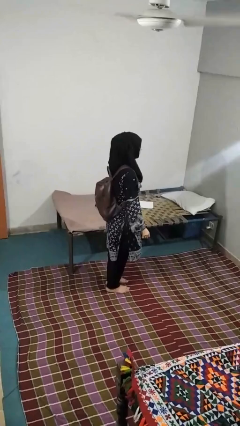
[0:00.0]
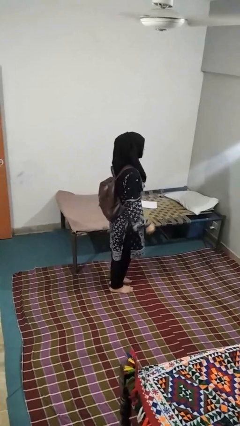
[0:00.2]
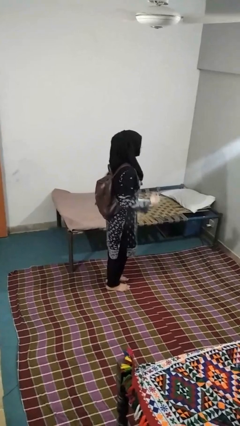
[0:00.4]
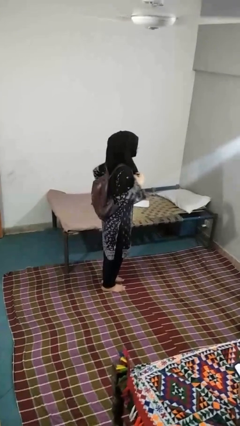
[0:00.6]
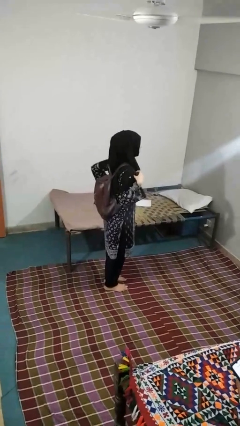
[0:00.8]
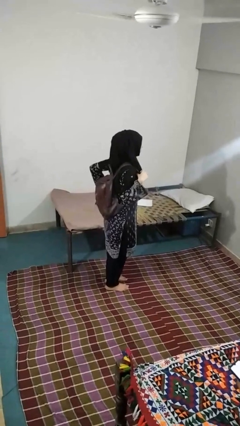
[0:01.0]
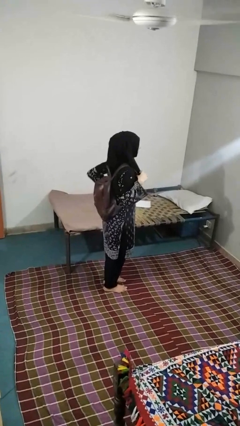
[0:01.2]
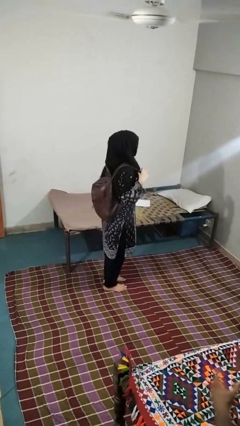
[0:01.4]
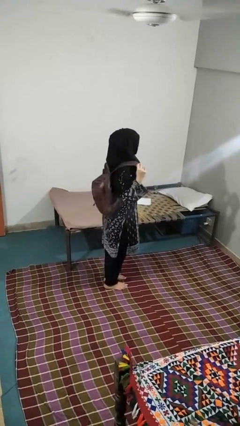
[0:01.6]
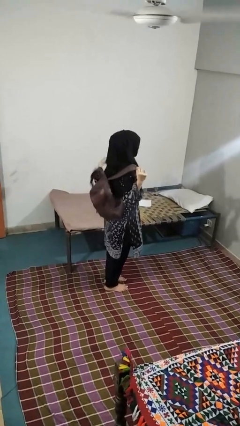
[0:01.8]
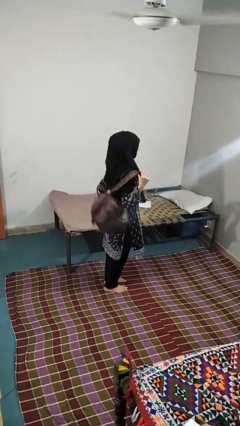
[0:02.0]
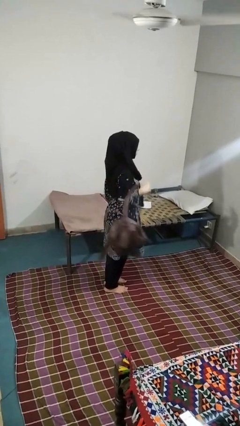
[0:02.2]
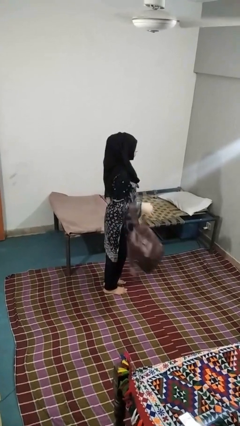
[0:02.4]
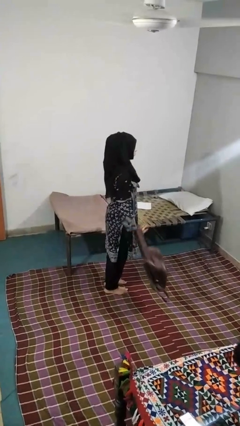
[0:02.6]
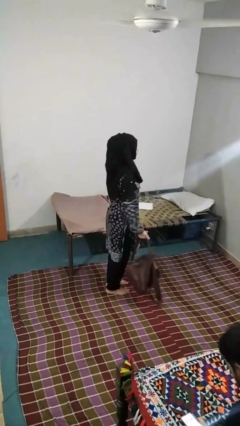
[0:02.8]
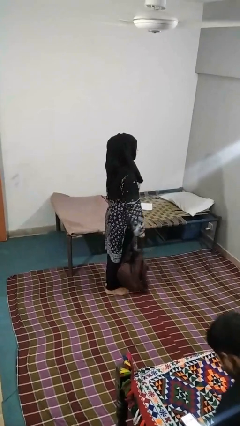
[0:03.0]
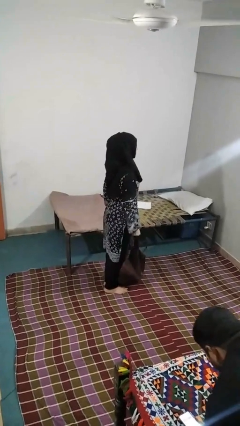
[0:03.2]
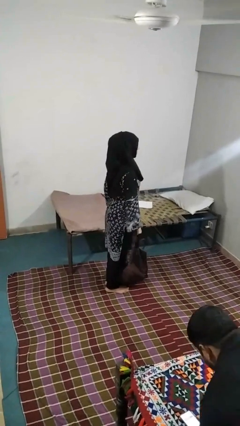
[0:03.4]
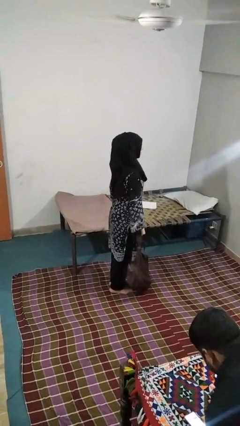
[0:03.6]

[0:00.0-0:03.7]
person takes off backpack

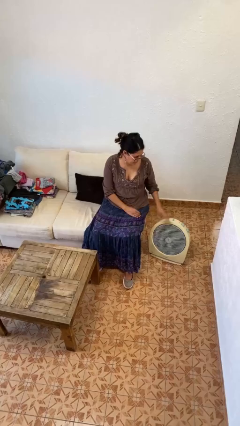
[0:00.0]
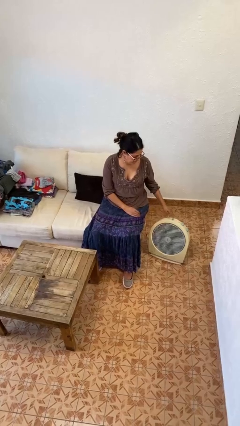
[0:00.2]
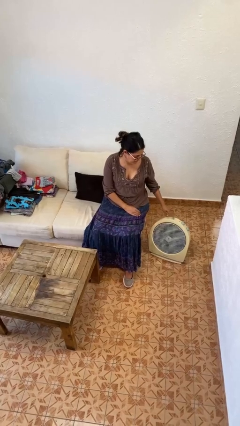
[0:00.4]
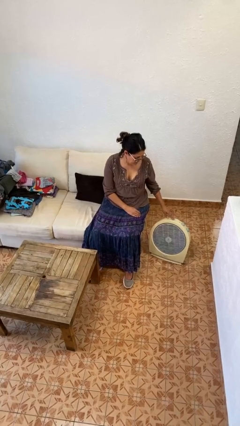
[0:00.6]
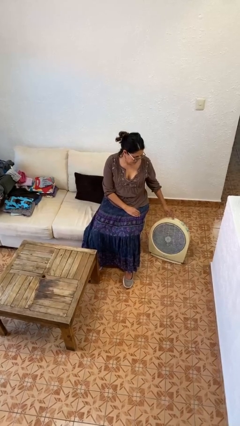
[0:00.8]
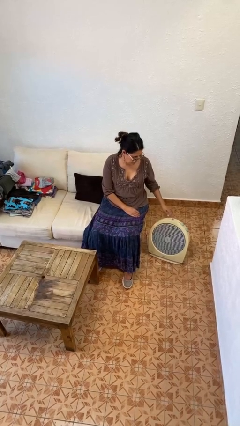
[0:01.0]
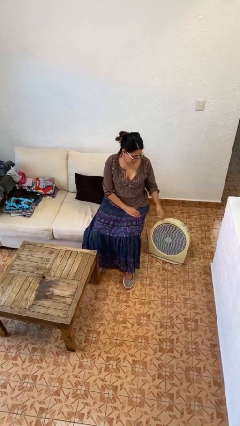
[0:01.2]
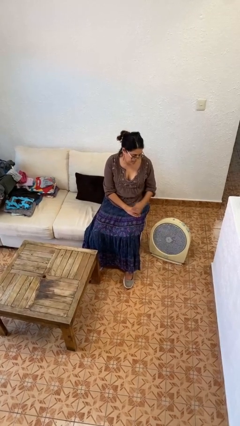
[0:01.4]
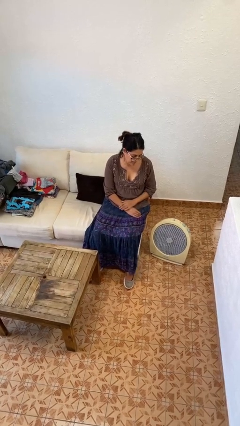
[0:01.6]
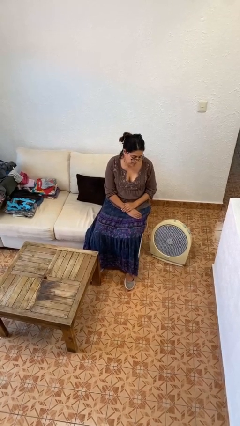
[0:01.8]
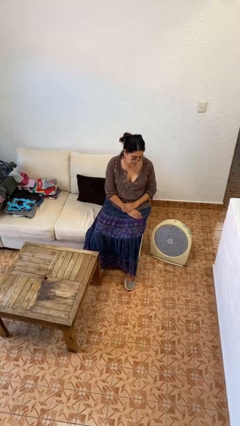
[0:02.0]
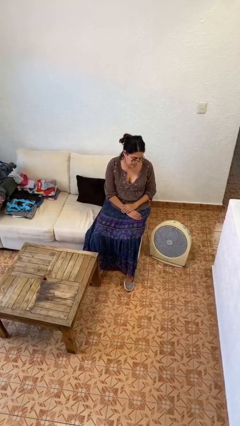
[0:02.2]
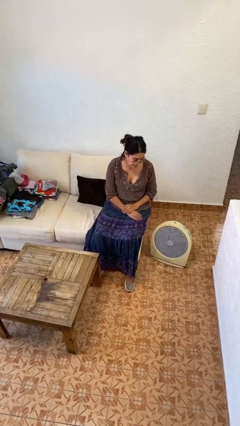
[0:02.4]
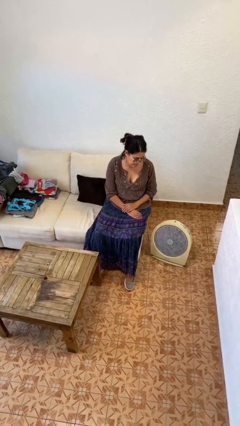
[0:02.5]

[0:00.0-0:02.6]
person turns on fan

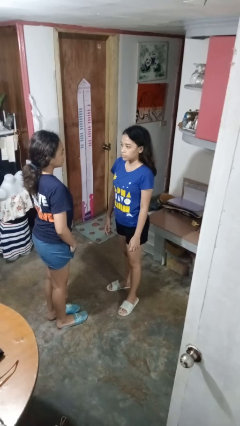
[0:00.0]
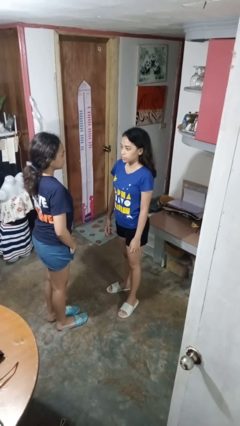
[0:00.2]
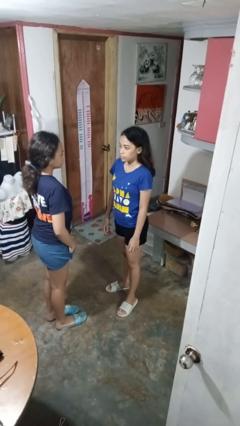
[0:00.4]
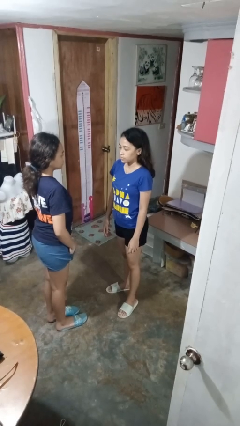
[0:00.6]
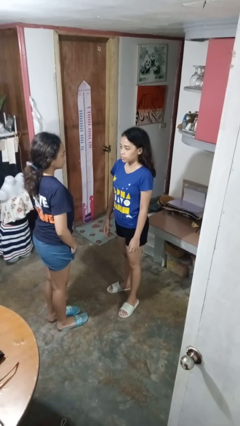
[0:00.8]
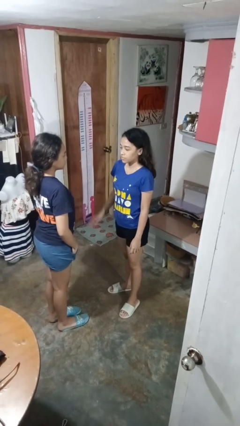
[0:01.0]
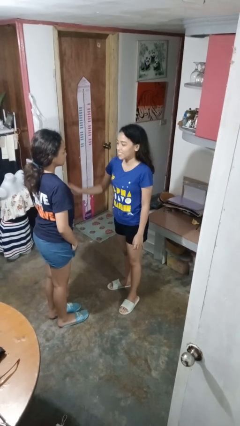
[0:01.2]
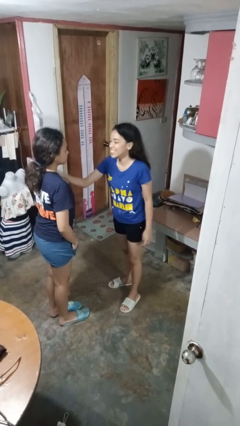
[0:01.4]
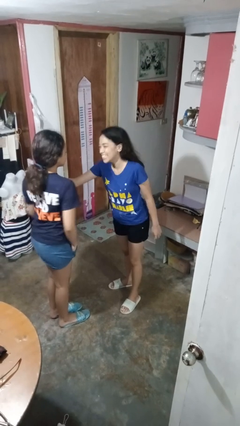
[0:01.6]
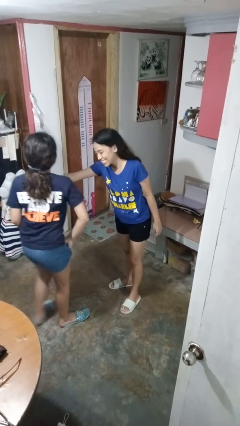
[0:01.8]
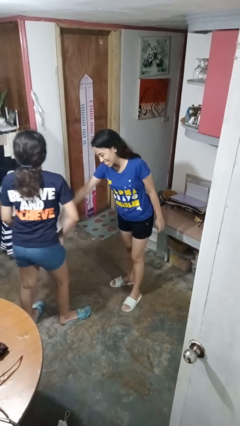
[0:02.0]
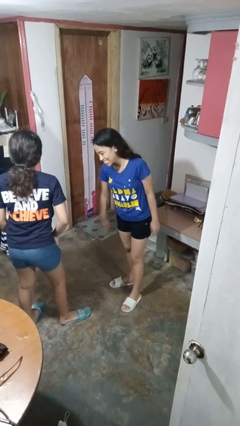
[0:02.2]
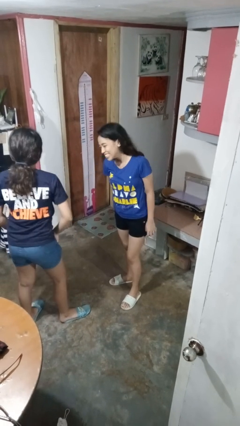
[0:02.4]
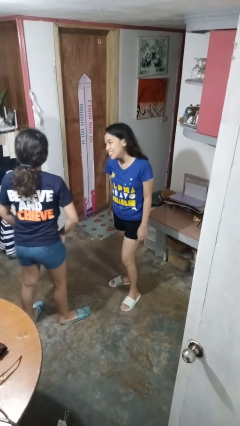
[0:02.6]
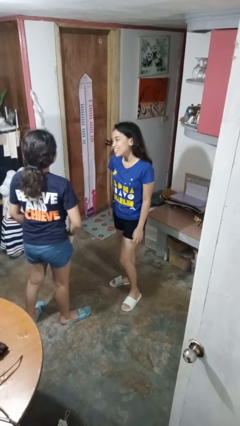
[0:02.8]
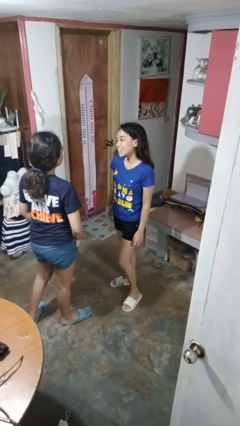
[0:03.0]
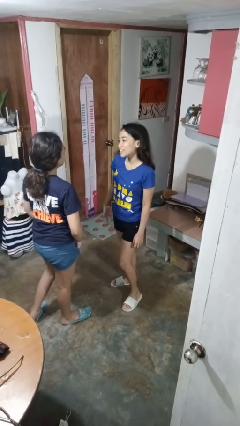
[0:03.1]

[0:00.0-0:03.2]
person shoves person

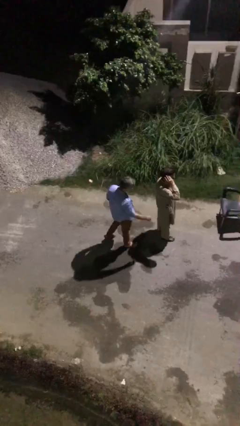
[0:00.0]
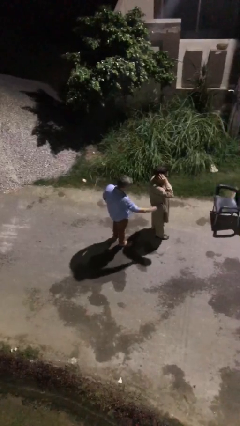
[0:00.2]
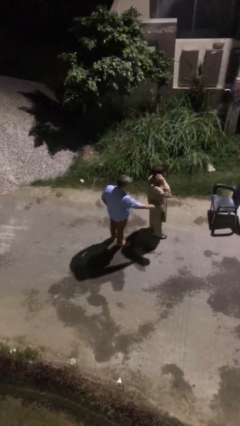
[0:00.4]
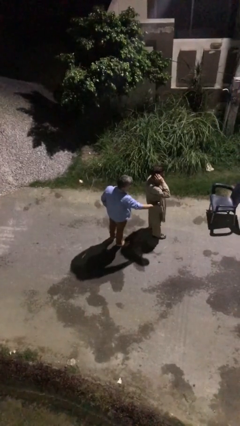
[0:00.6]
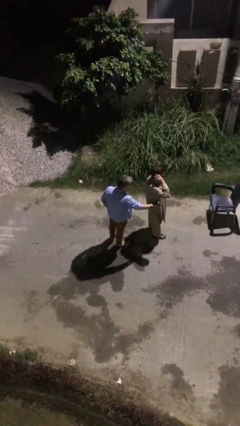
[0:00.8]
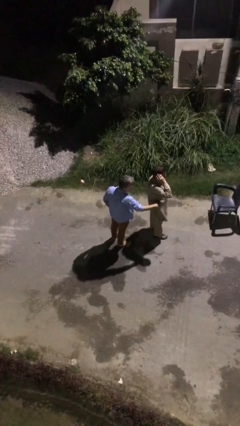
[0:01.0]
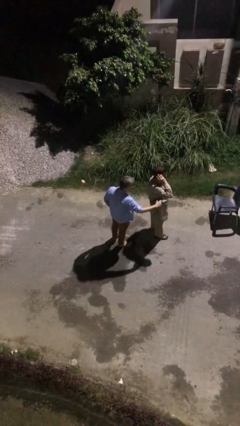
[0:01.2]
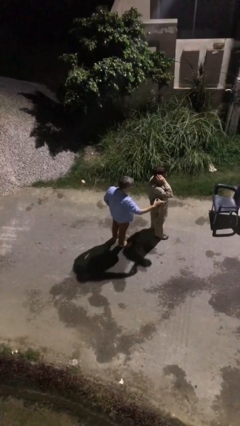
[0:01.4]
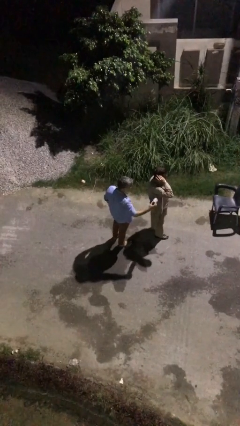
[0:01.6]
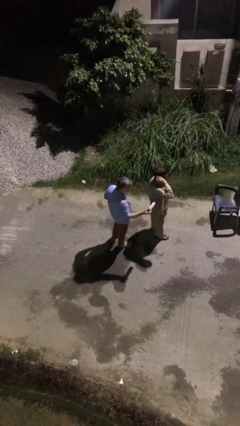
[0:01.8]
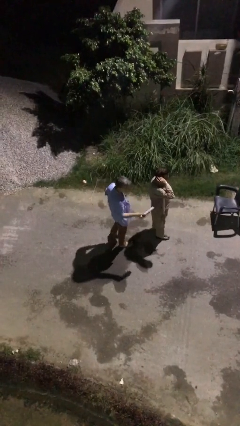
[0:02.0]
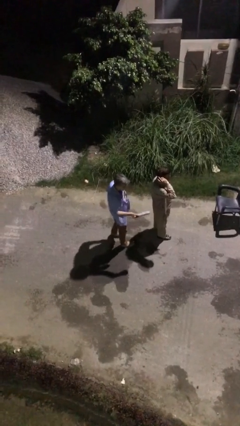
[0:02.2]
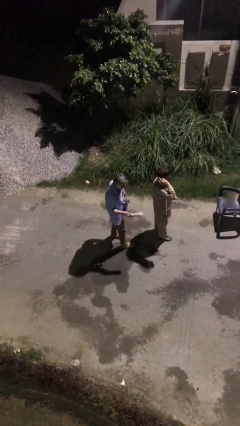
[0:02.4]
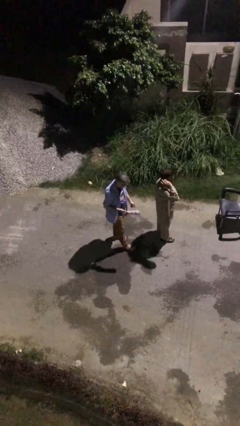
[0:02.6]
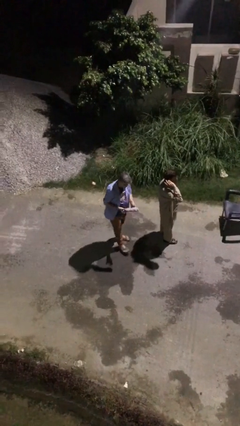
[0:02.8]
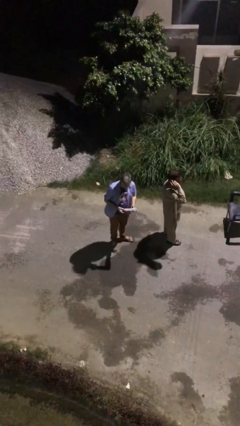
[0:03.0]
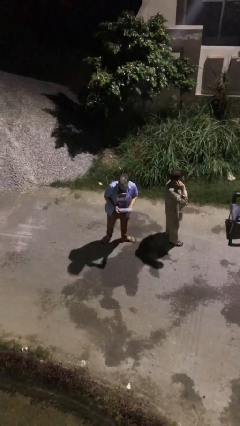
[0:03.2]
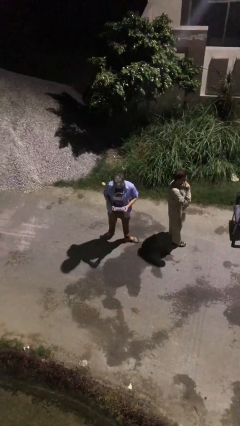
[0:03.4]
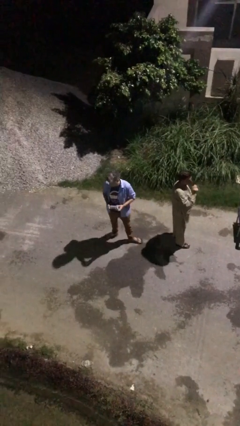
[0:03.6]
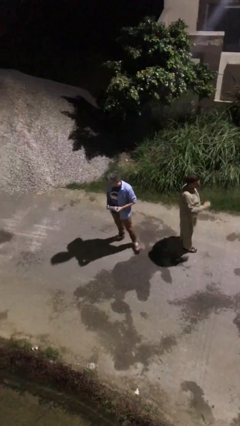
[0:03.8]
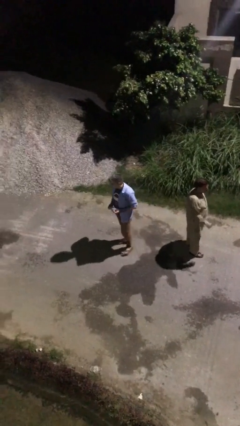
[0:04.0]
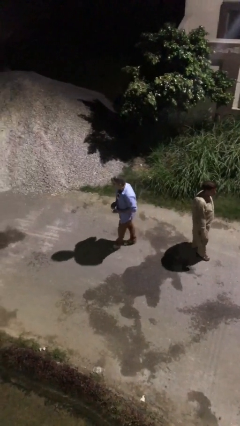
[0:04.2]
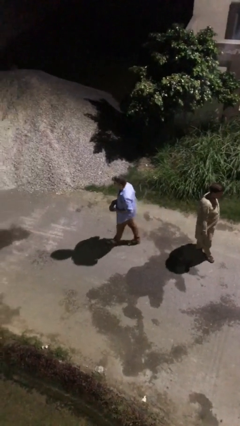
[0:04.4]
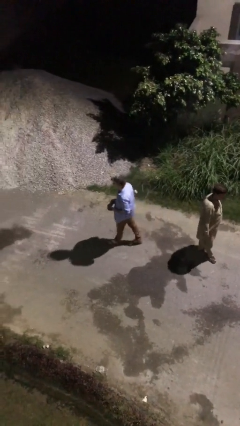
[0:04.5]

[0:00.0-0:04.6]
person steals object from person

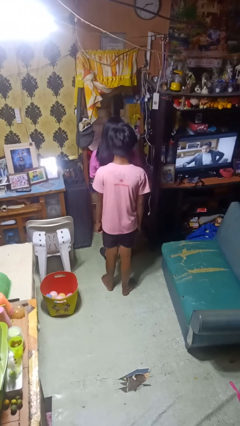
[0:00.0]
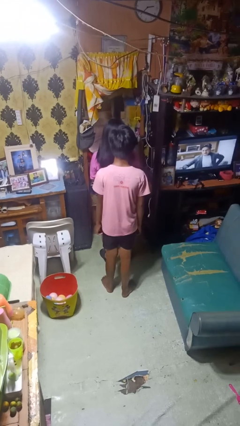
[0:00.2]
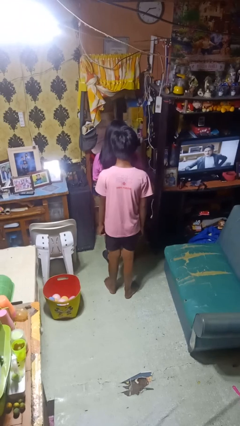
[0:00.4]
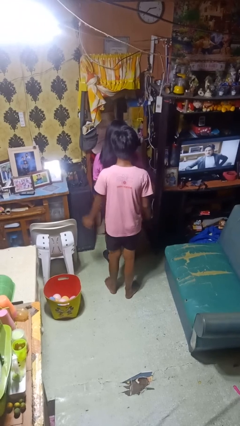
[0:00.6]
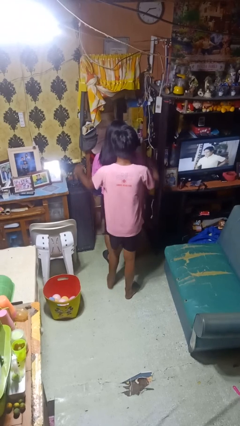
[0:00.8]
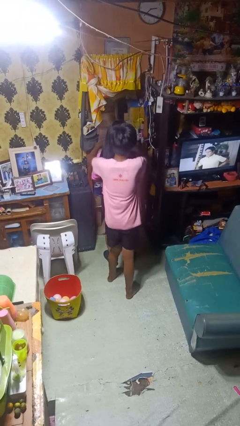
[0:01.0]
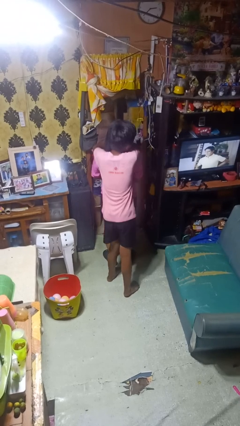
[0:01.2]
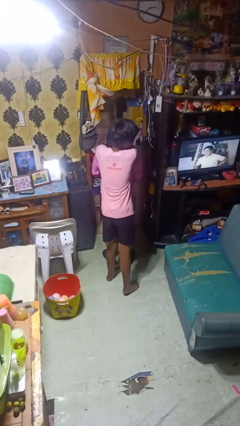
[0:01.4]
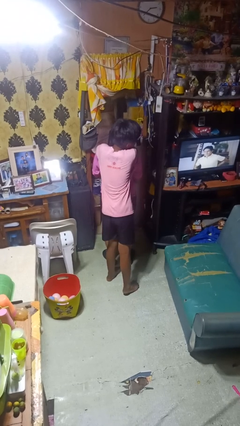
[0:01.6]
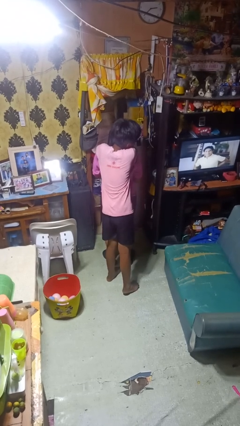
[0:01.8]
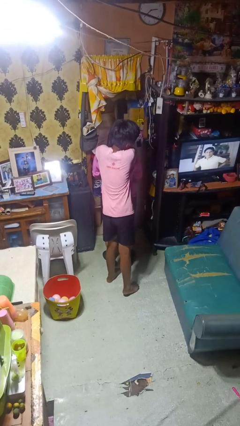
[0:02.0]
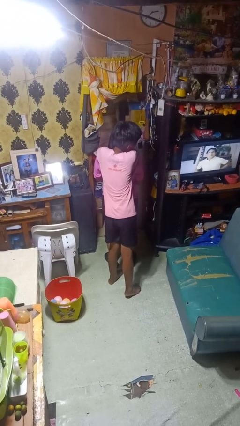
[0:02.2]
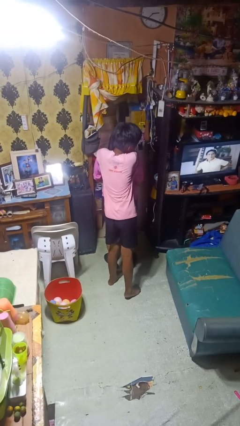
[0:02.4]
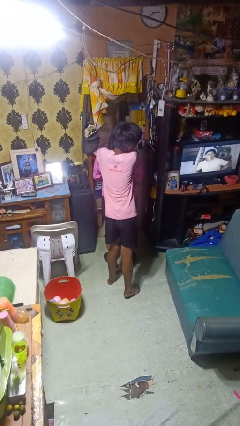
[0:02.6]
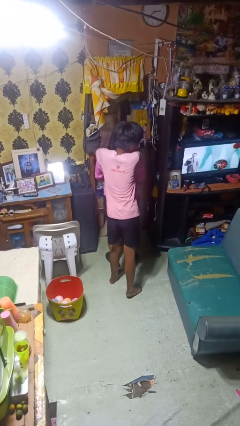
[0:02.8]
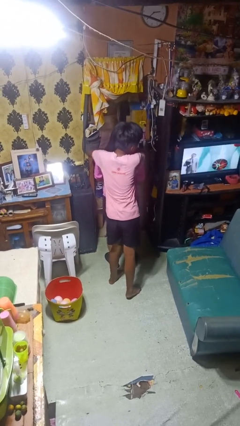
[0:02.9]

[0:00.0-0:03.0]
person hugs person from behind

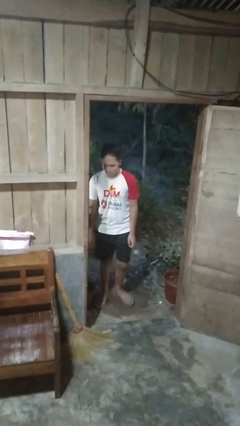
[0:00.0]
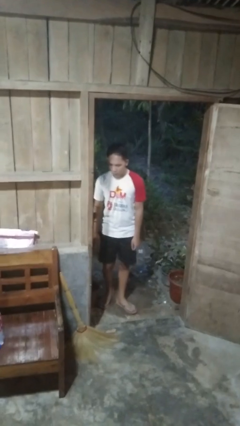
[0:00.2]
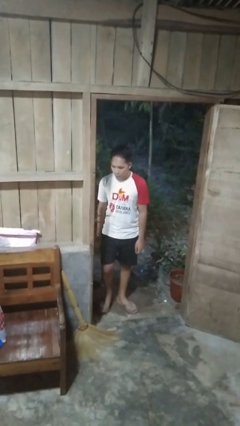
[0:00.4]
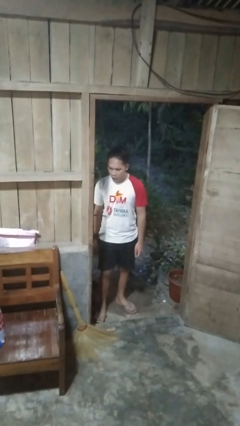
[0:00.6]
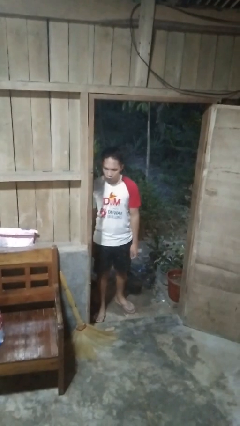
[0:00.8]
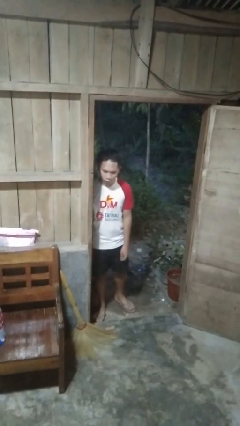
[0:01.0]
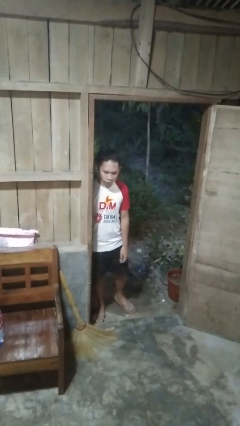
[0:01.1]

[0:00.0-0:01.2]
person bumps into wall
